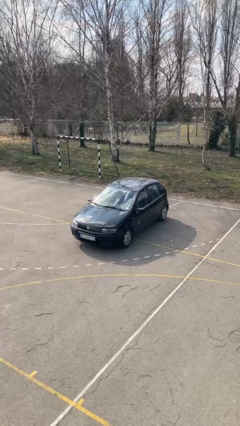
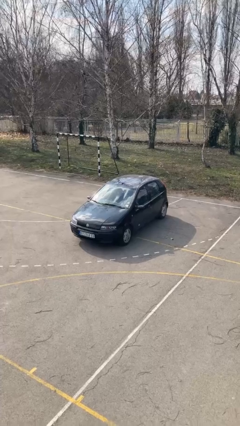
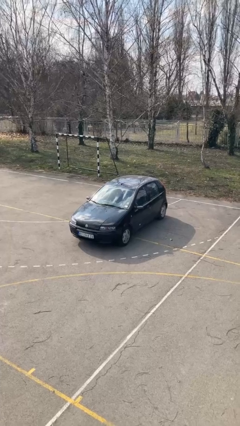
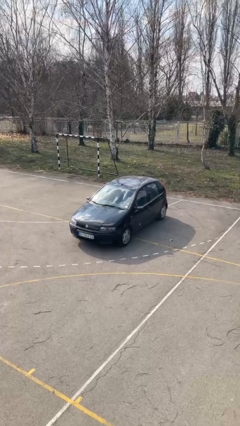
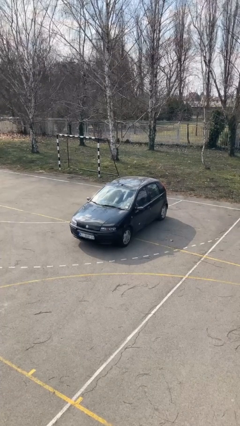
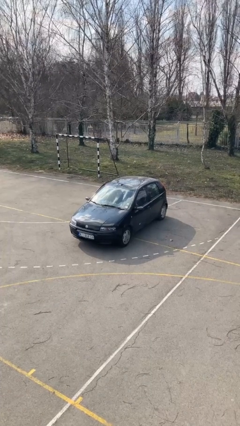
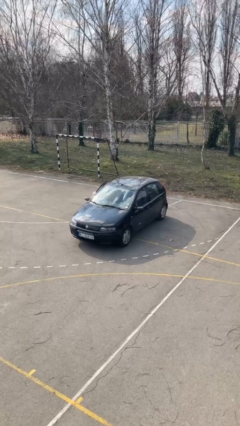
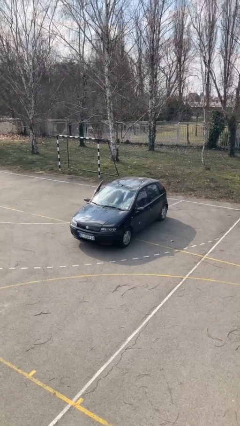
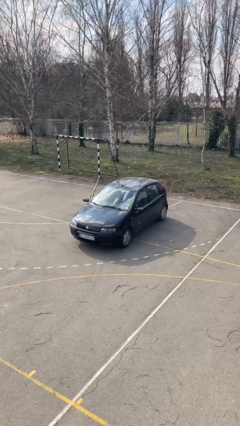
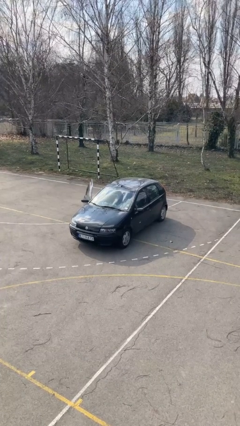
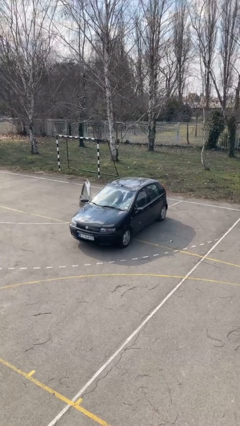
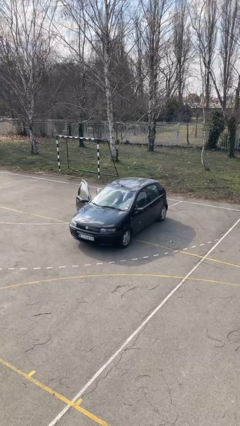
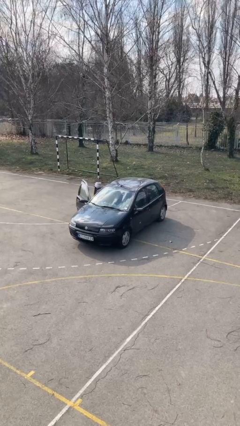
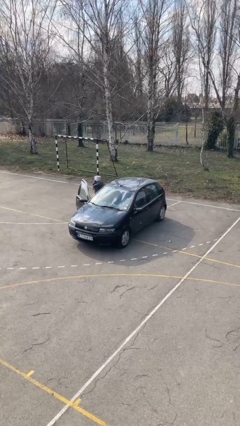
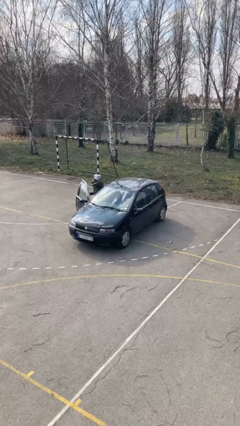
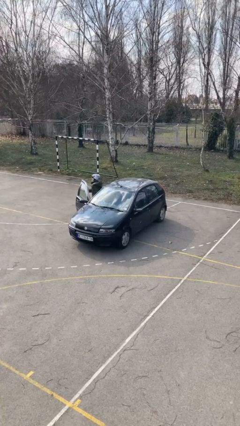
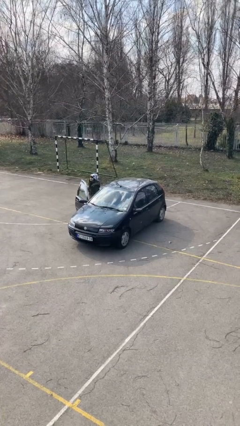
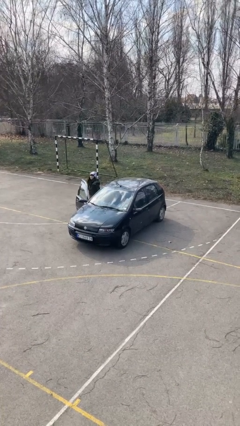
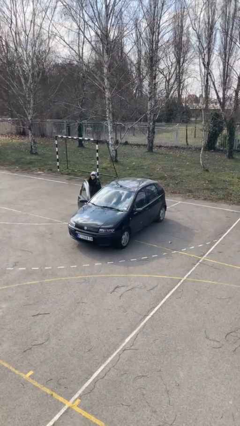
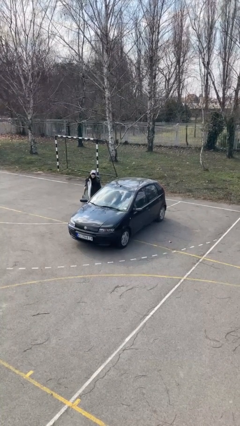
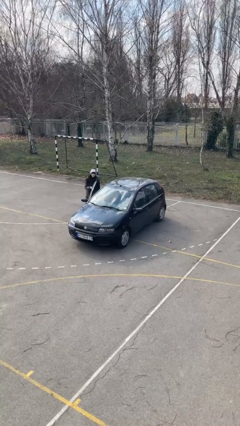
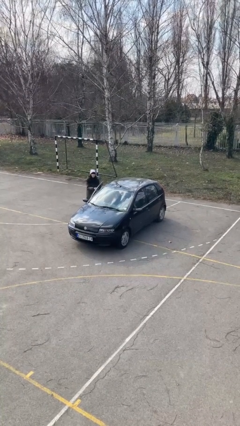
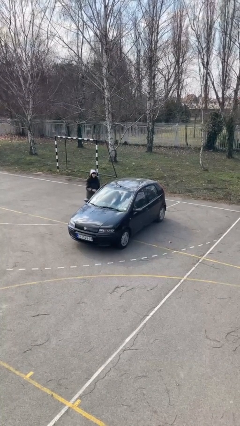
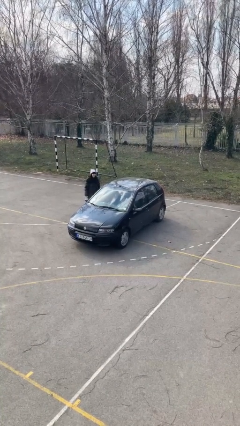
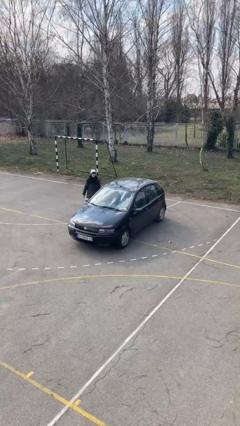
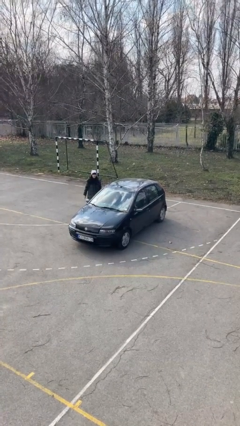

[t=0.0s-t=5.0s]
car drops off person

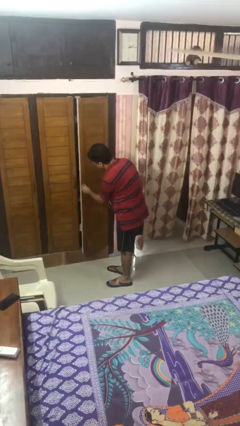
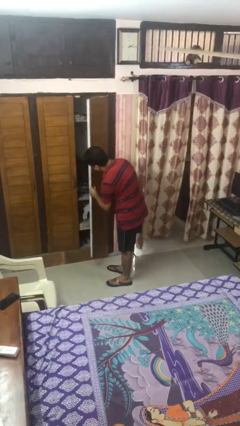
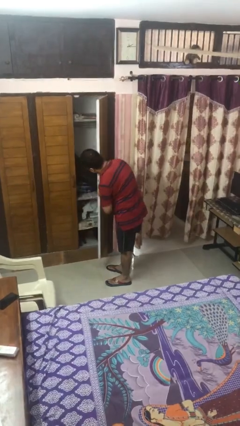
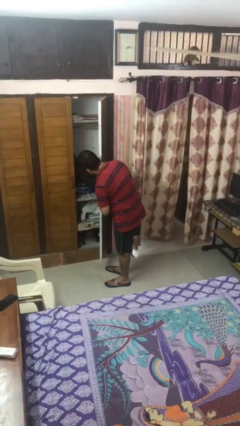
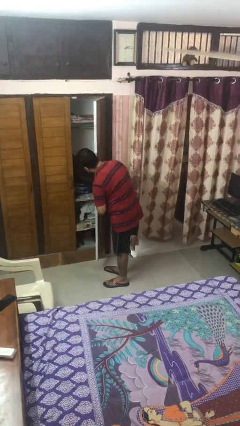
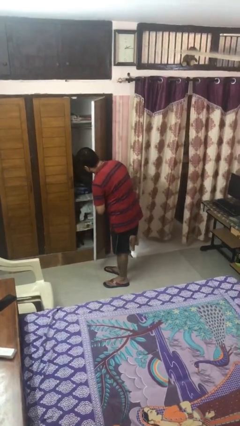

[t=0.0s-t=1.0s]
person opens facility door

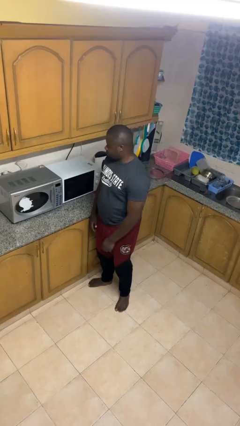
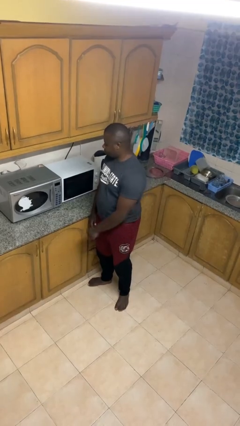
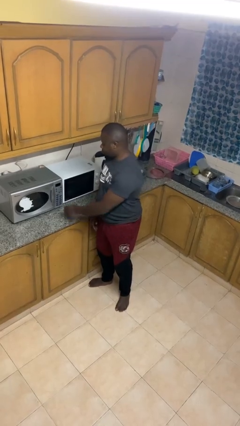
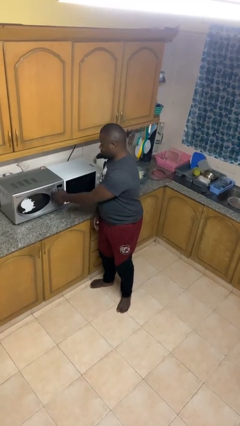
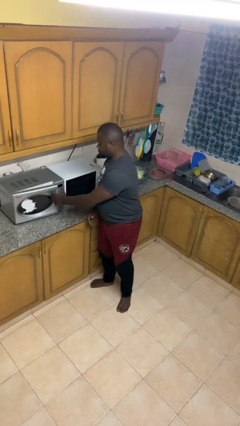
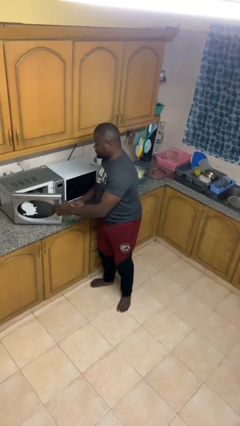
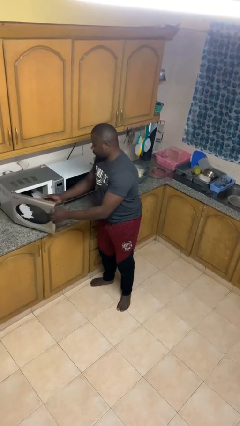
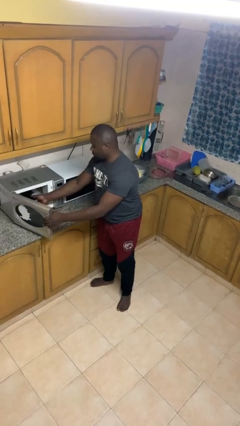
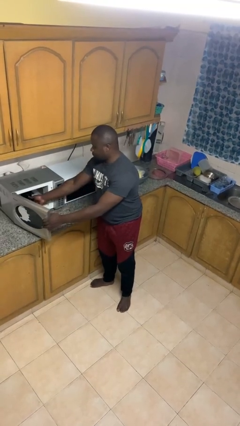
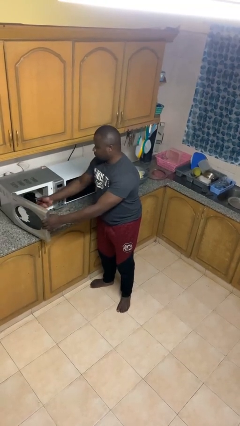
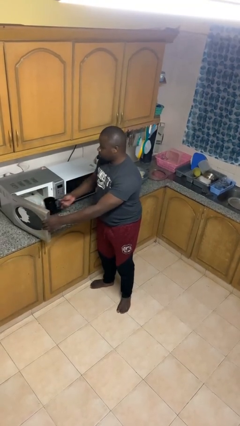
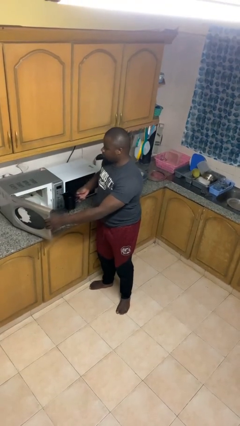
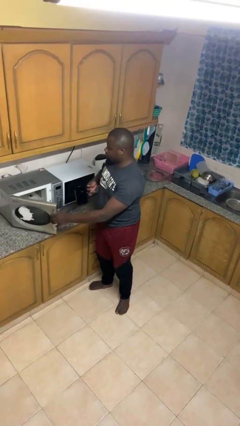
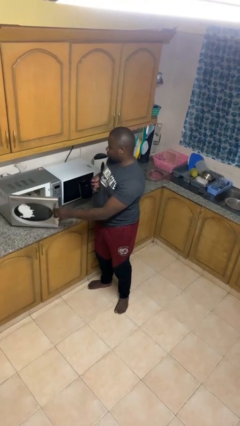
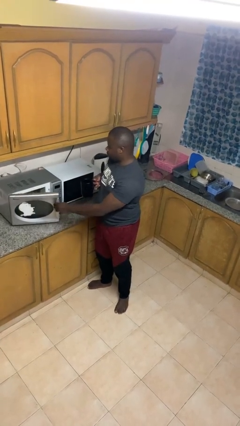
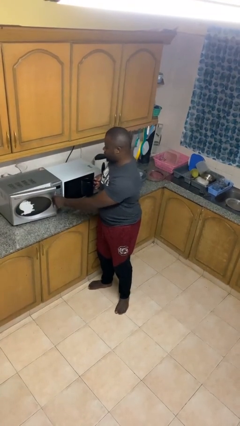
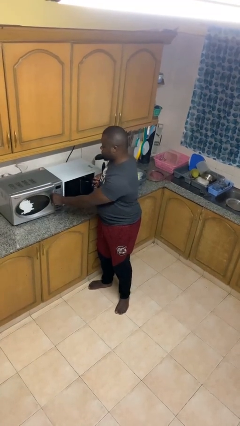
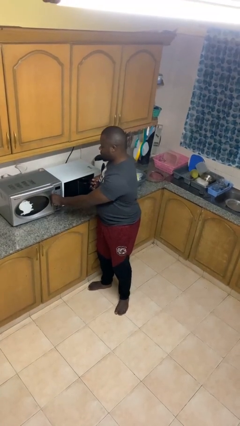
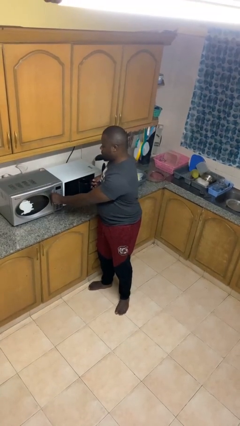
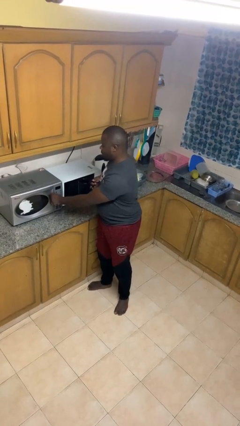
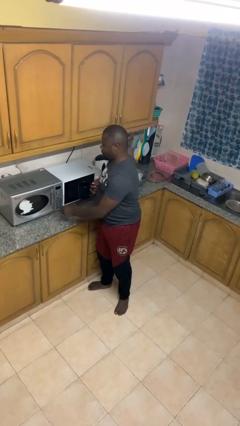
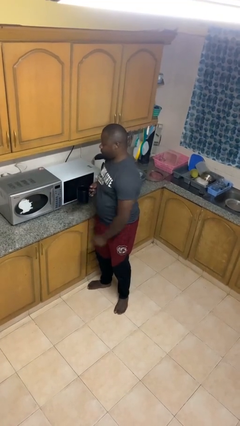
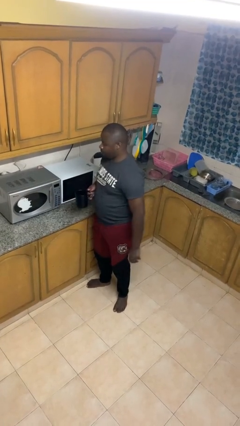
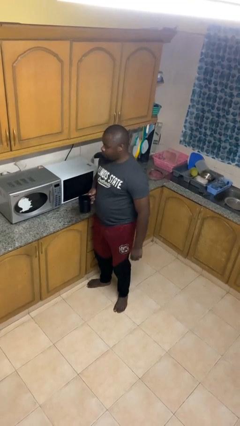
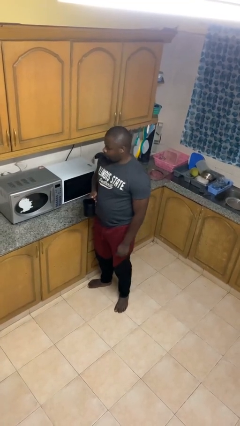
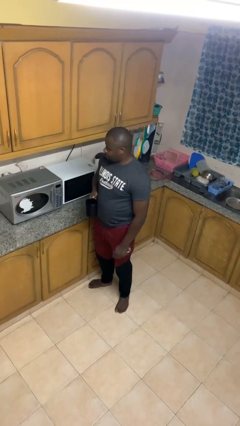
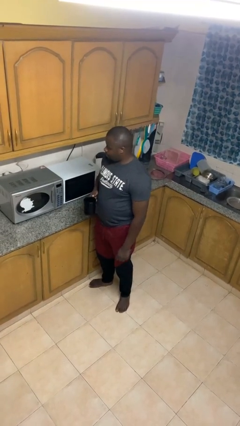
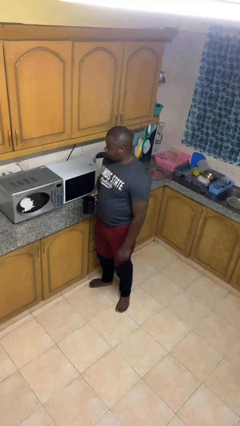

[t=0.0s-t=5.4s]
person takes object from microwave

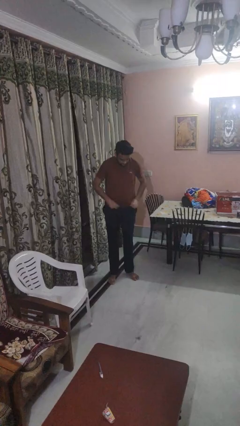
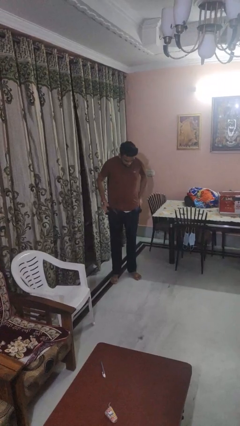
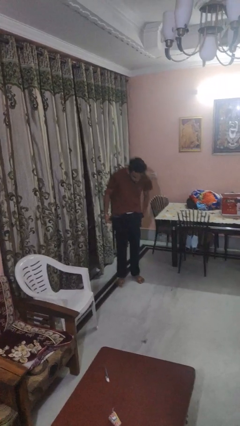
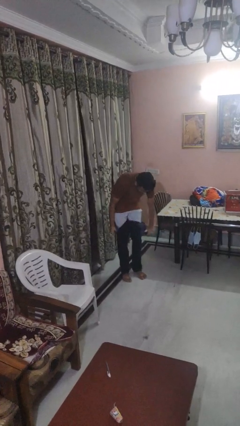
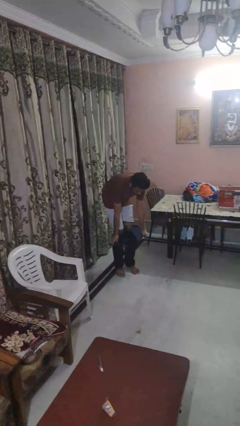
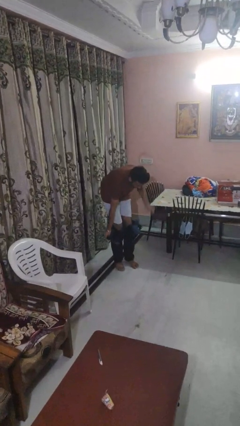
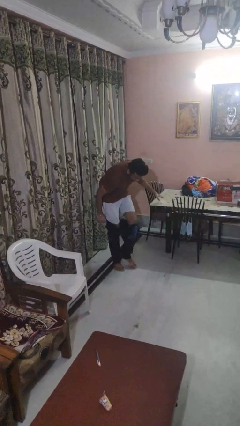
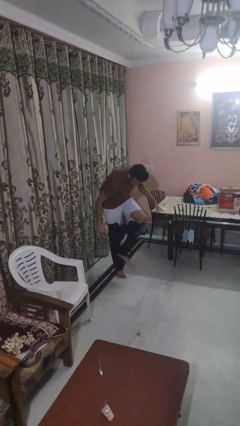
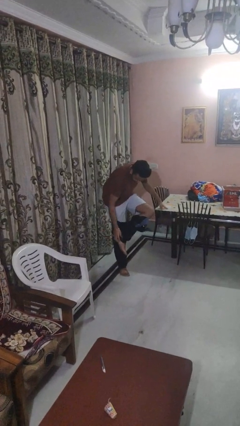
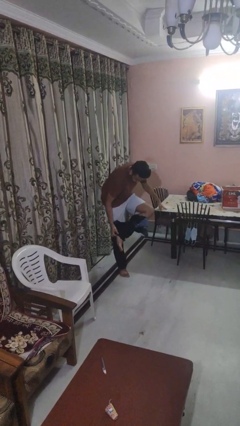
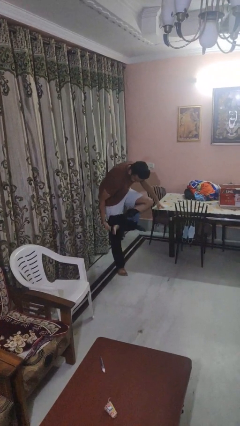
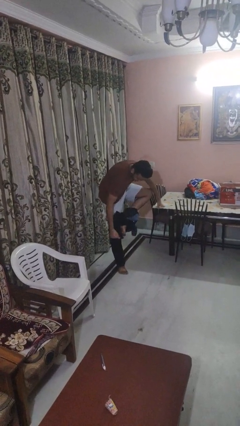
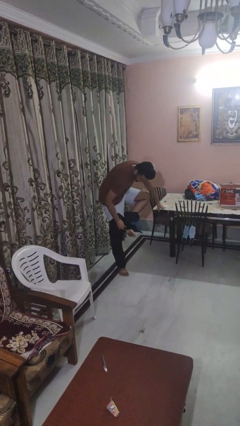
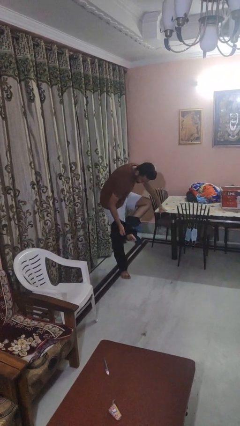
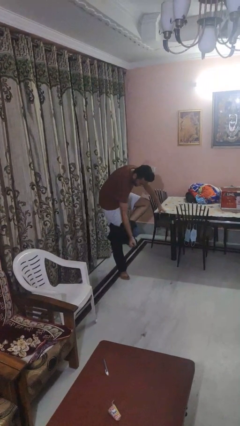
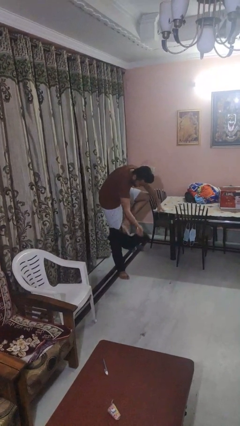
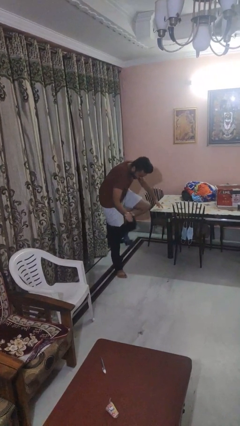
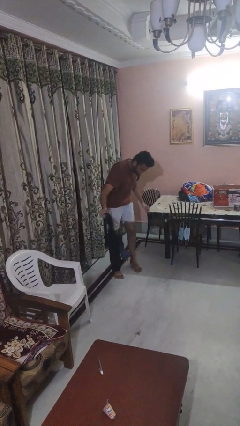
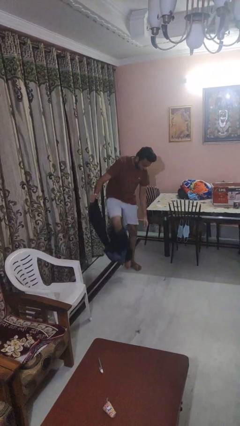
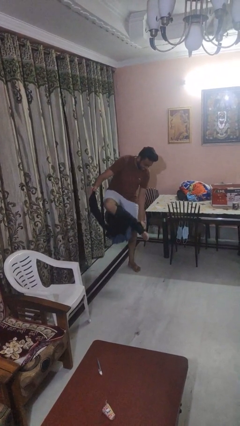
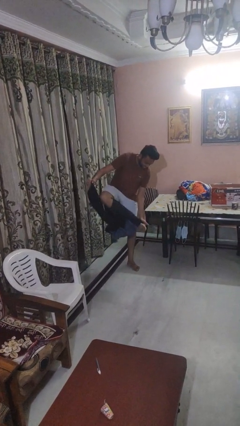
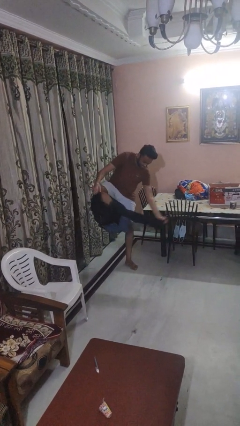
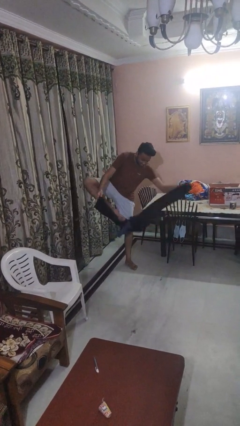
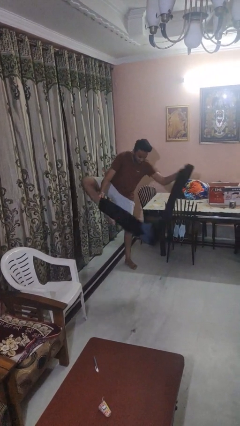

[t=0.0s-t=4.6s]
person takes off pants

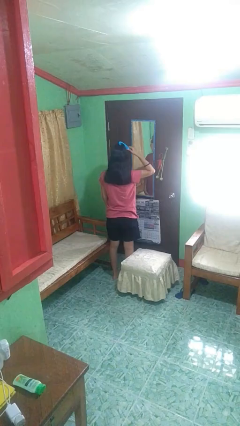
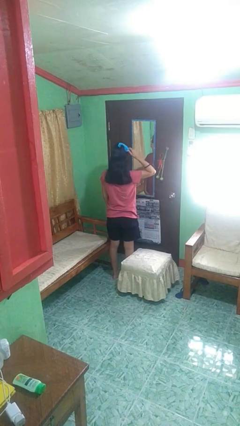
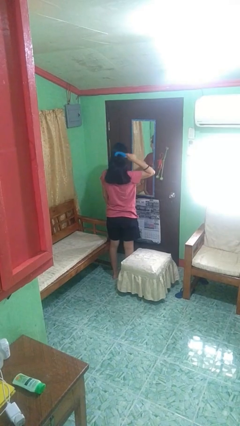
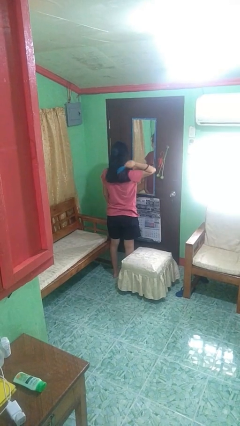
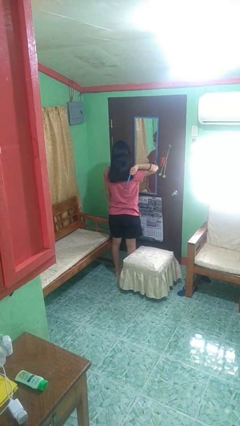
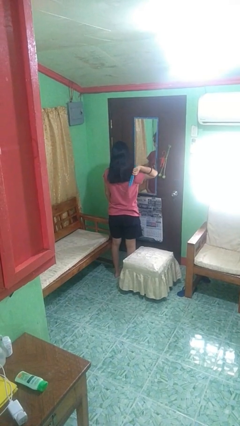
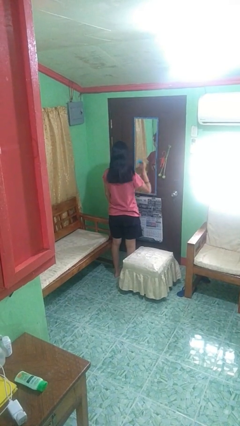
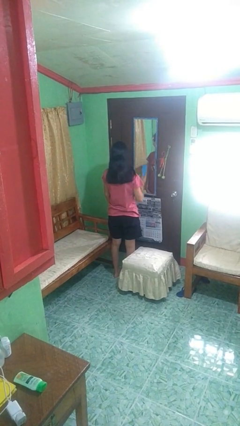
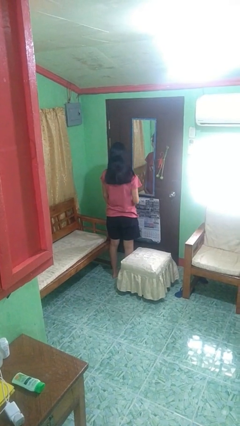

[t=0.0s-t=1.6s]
person brushes hair

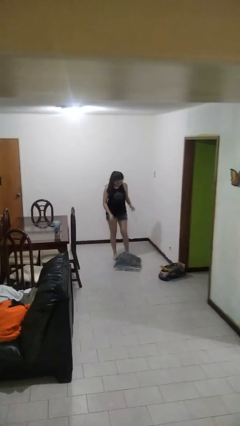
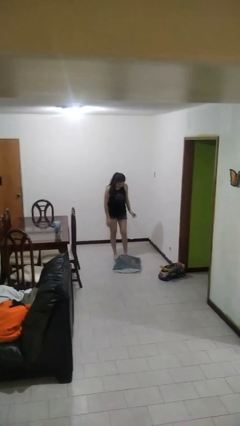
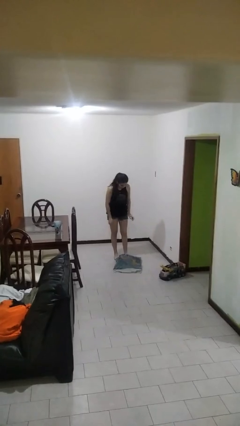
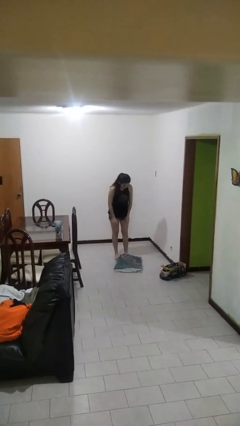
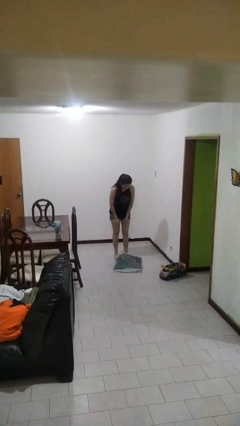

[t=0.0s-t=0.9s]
person drops object
